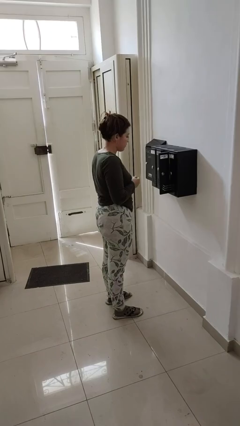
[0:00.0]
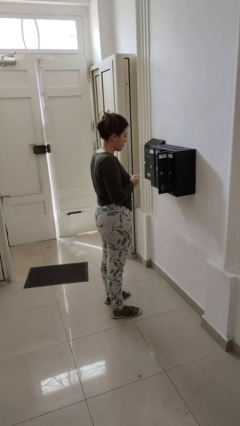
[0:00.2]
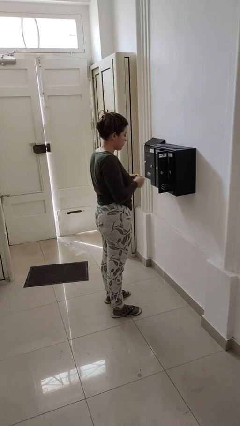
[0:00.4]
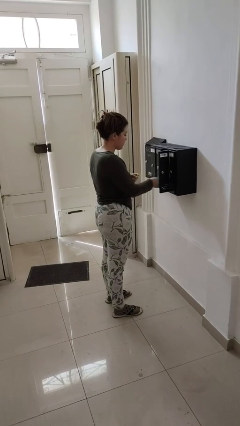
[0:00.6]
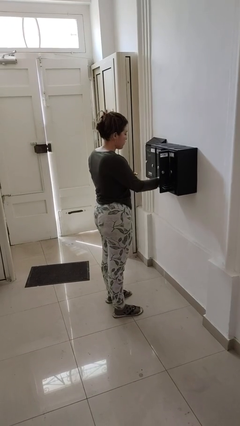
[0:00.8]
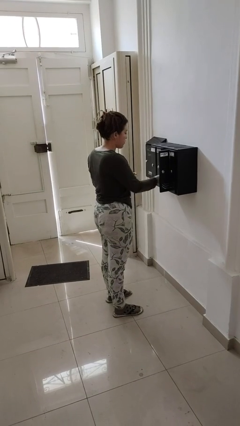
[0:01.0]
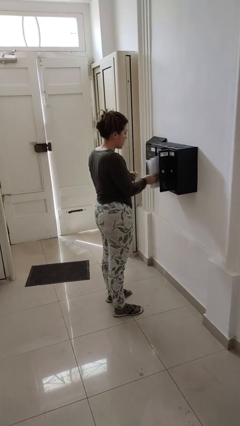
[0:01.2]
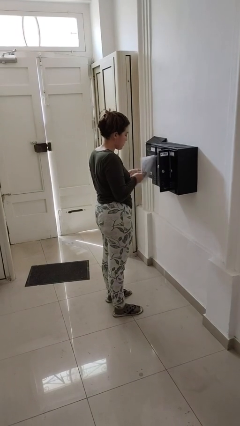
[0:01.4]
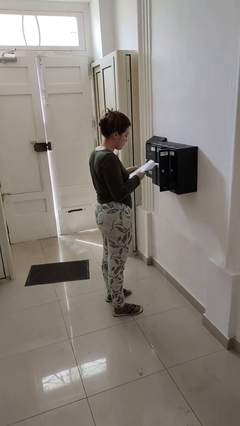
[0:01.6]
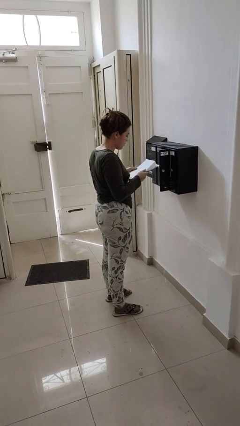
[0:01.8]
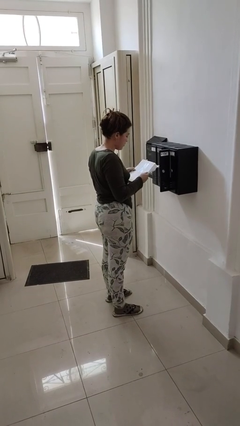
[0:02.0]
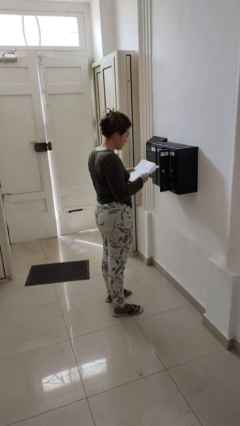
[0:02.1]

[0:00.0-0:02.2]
person takes letters from mailbox

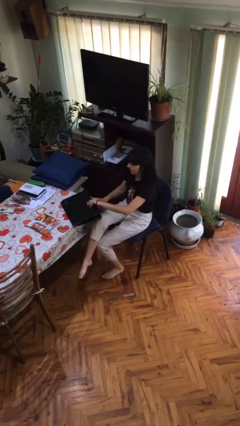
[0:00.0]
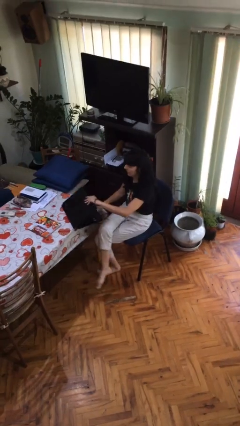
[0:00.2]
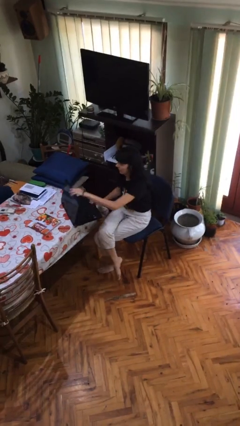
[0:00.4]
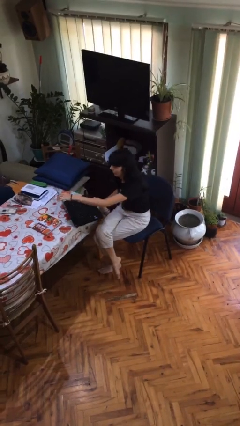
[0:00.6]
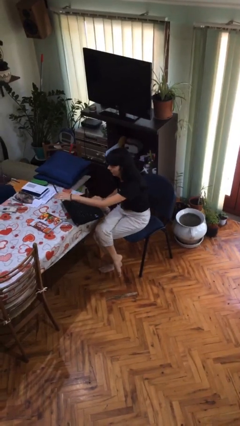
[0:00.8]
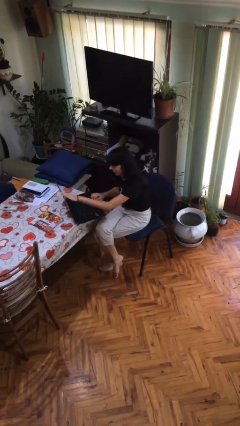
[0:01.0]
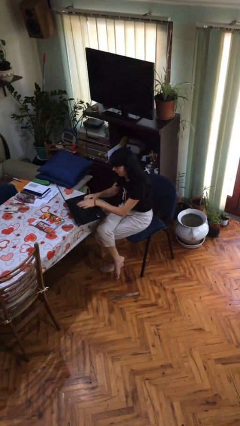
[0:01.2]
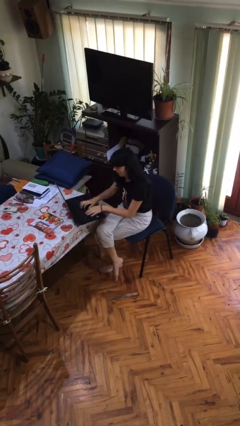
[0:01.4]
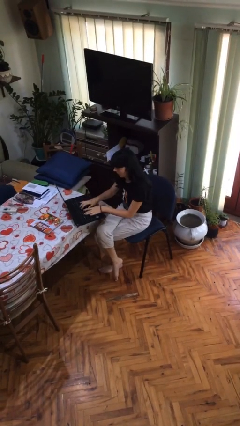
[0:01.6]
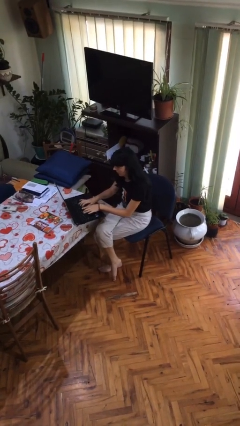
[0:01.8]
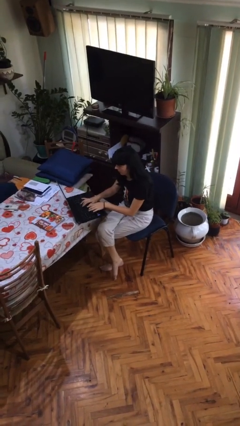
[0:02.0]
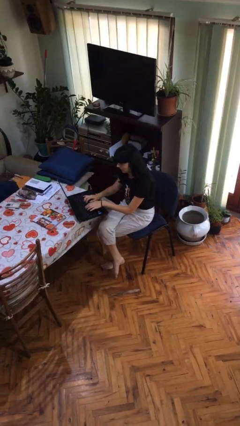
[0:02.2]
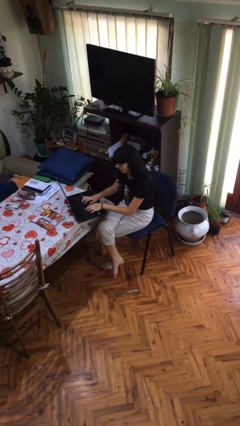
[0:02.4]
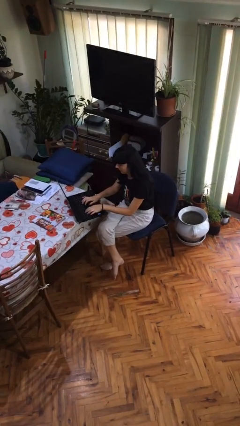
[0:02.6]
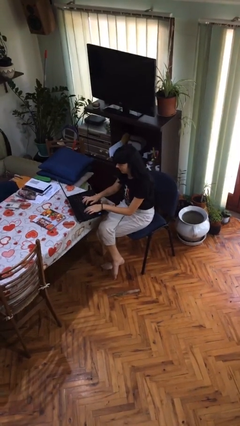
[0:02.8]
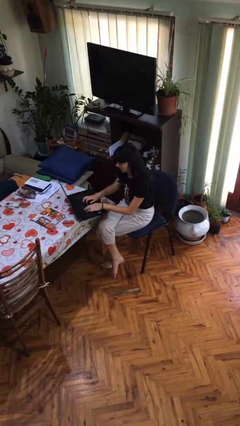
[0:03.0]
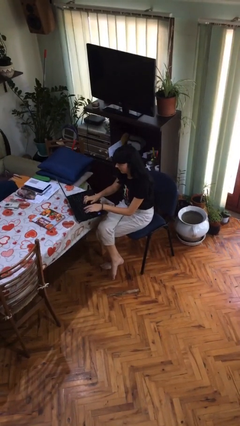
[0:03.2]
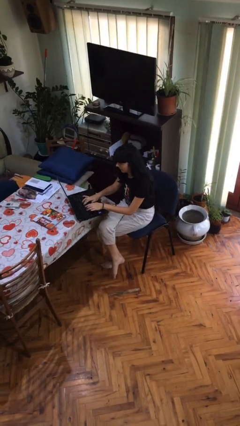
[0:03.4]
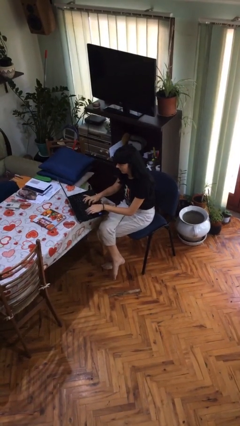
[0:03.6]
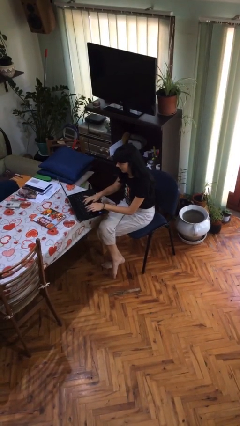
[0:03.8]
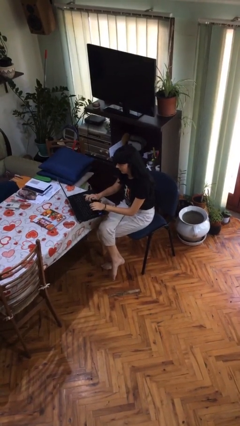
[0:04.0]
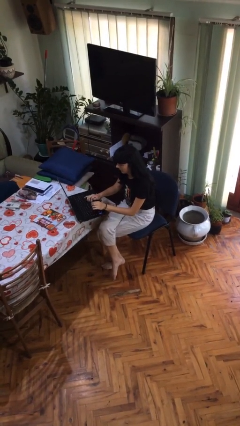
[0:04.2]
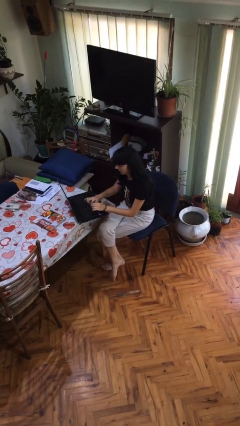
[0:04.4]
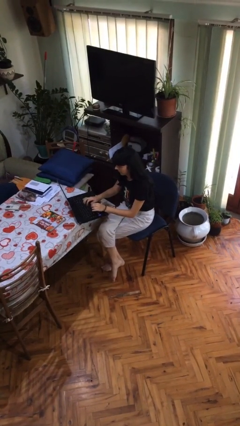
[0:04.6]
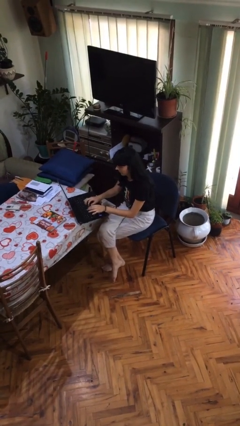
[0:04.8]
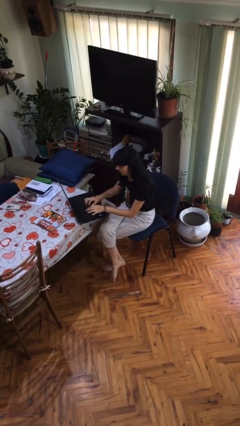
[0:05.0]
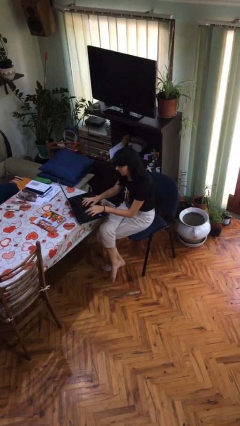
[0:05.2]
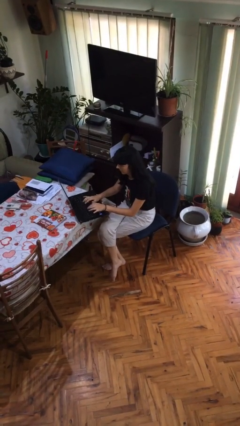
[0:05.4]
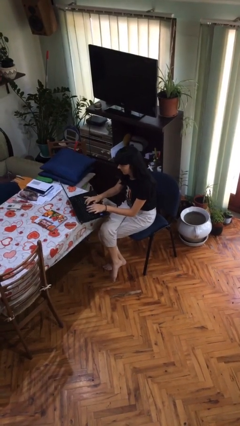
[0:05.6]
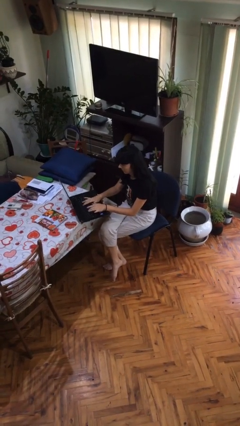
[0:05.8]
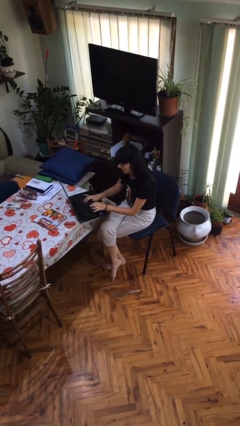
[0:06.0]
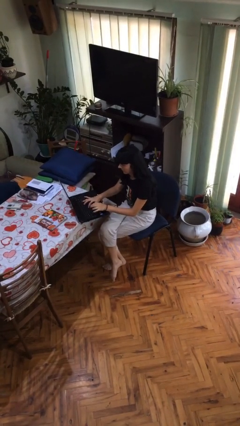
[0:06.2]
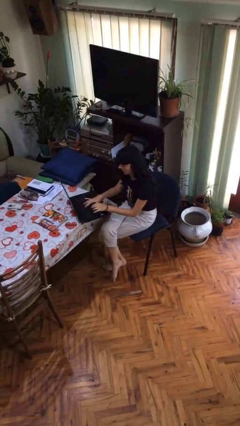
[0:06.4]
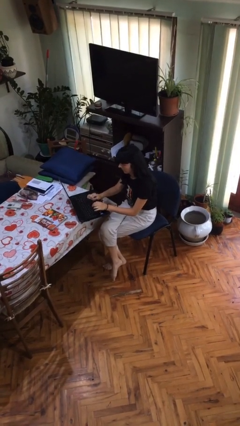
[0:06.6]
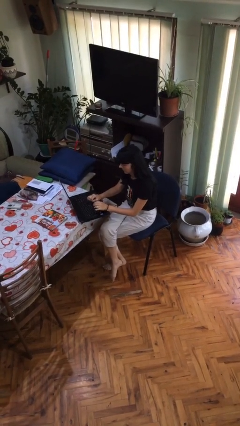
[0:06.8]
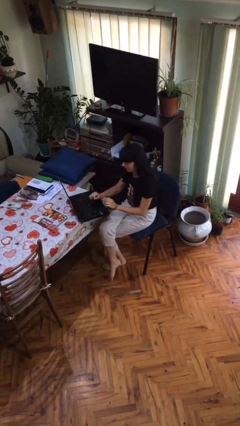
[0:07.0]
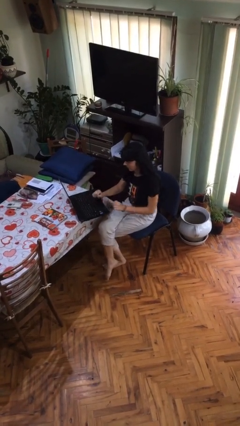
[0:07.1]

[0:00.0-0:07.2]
person interacts with laptop

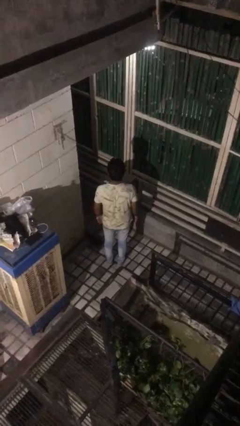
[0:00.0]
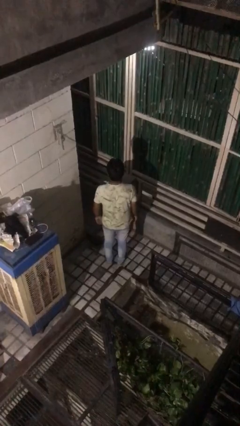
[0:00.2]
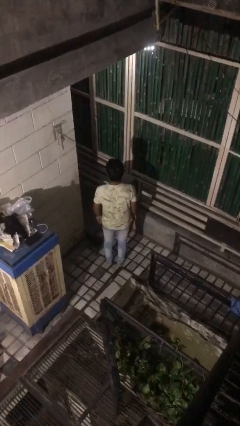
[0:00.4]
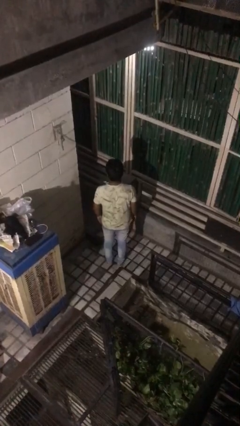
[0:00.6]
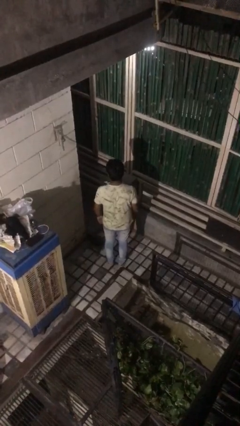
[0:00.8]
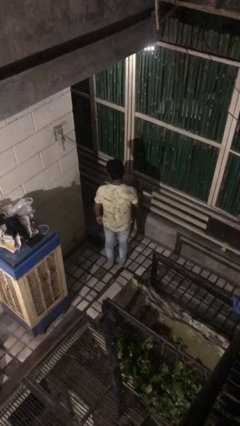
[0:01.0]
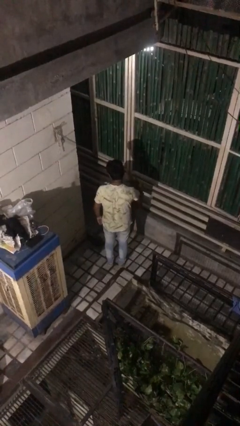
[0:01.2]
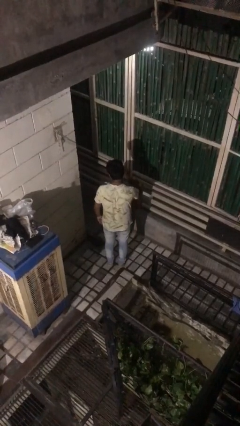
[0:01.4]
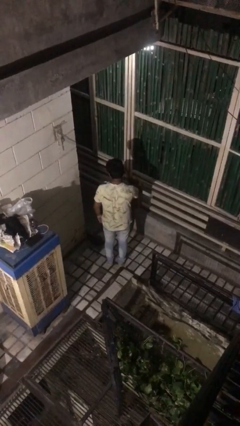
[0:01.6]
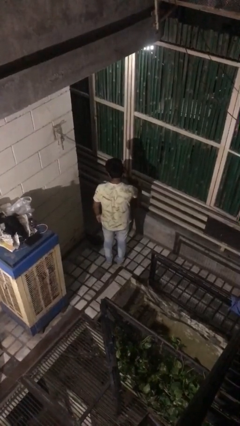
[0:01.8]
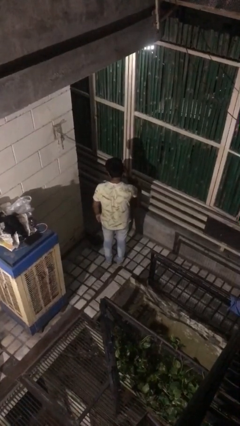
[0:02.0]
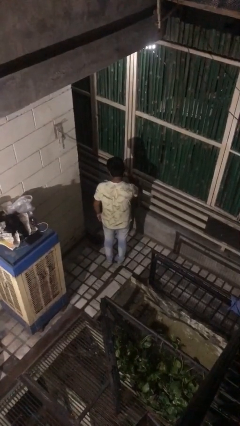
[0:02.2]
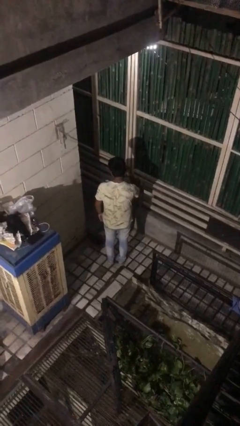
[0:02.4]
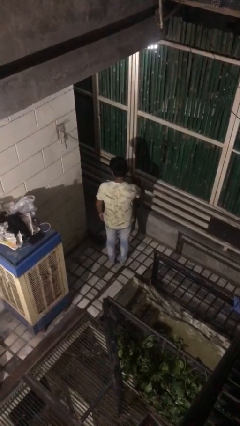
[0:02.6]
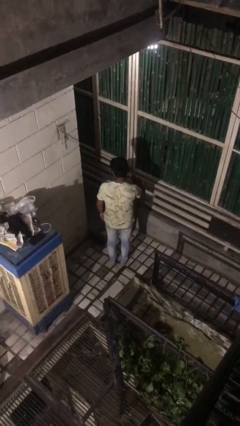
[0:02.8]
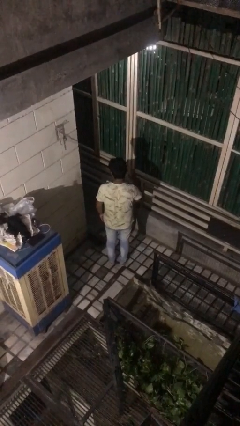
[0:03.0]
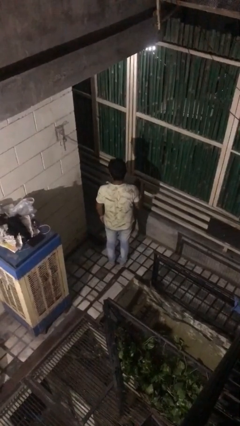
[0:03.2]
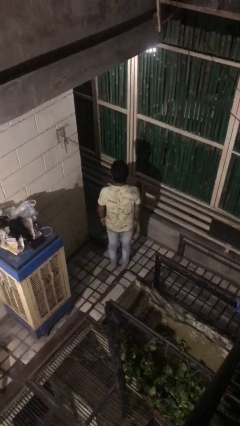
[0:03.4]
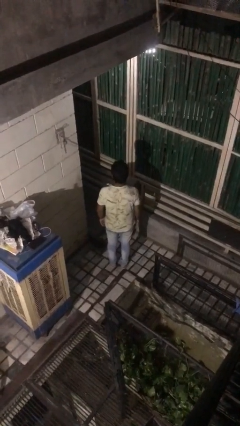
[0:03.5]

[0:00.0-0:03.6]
person gestures listen closely

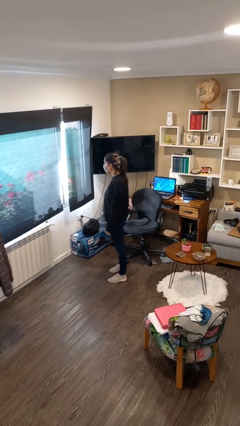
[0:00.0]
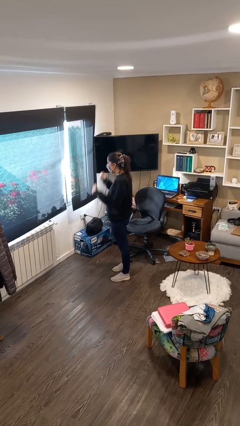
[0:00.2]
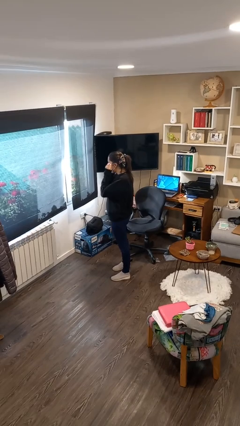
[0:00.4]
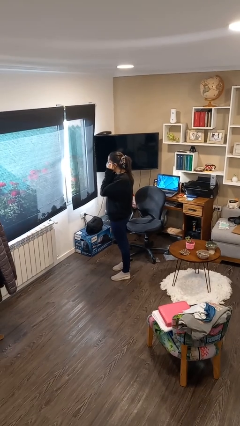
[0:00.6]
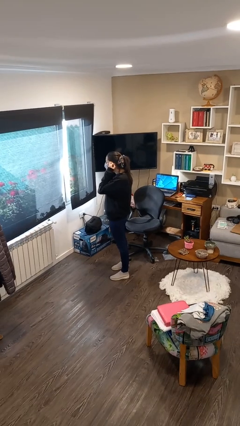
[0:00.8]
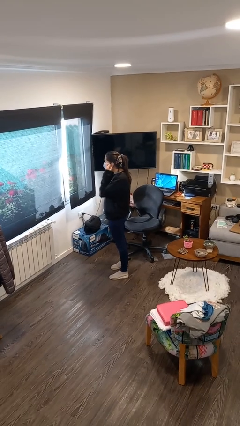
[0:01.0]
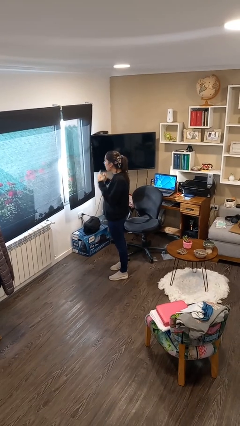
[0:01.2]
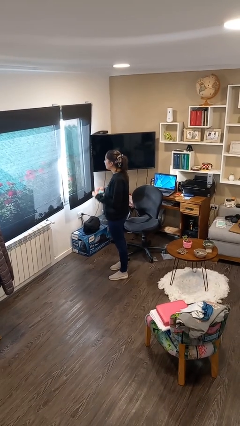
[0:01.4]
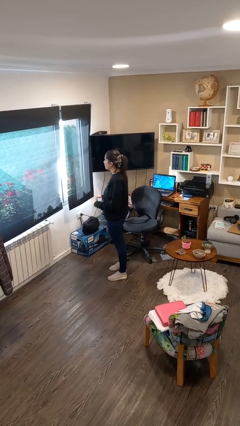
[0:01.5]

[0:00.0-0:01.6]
person takes off facemask

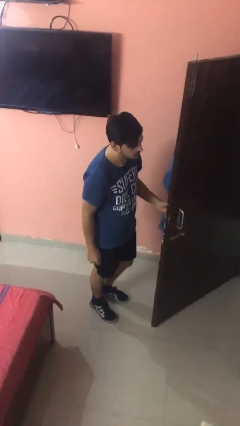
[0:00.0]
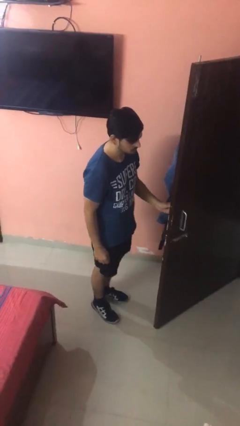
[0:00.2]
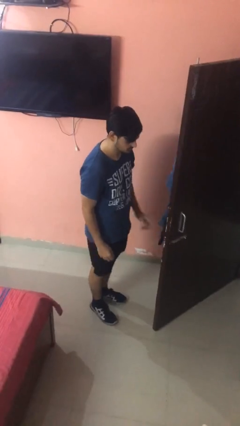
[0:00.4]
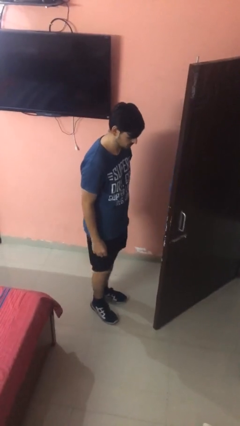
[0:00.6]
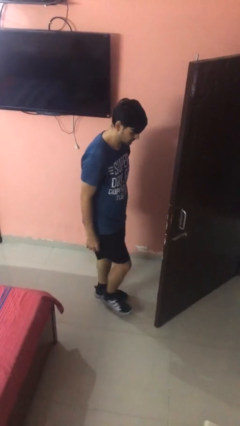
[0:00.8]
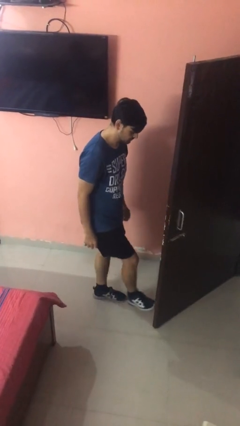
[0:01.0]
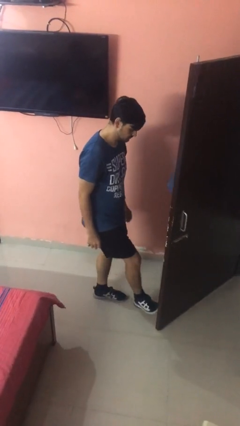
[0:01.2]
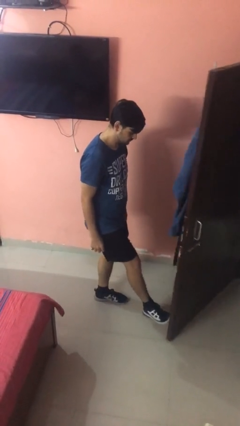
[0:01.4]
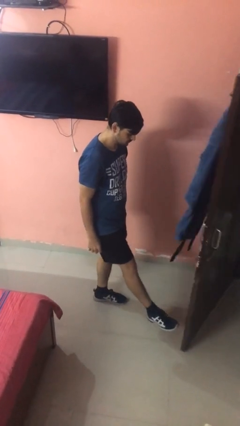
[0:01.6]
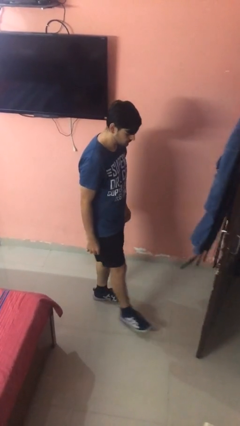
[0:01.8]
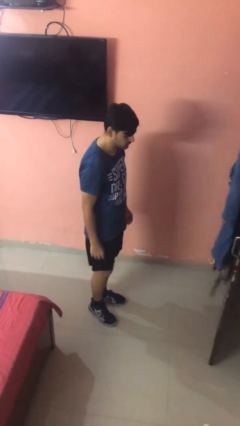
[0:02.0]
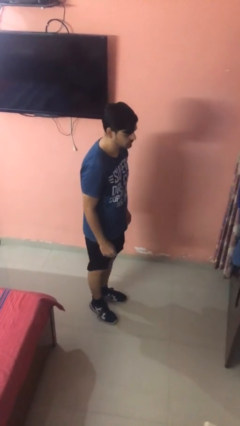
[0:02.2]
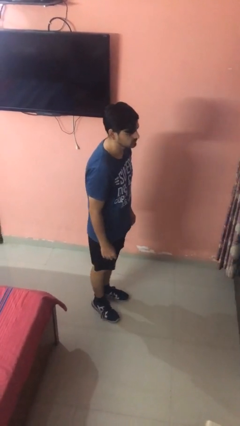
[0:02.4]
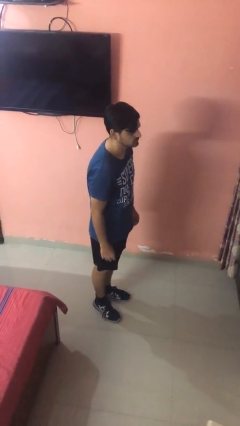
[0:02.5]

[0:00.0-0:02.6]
person closes door with foot
